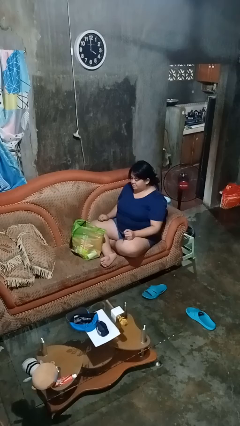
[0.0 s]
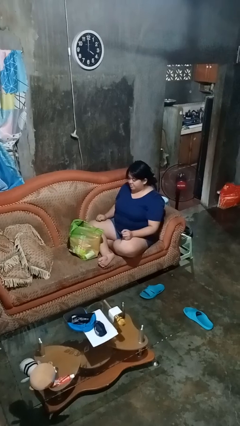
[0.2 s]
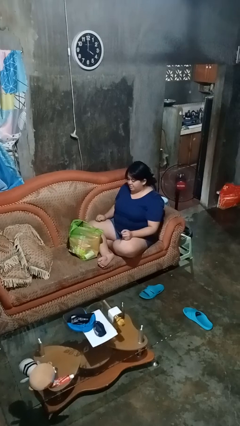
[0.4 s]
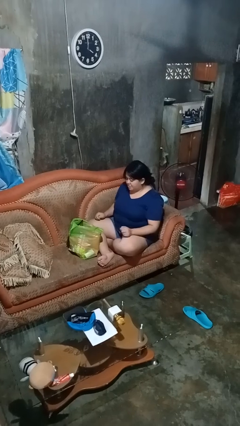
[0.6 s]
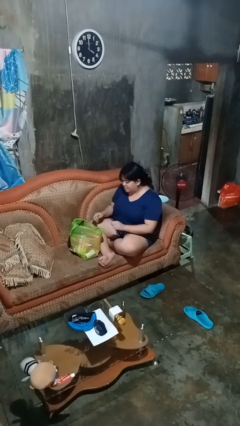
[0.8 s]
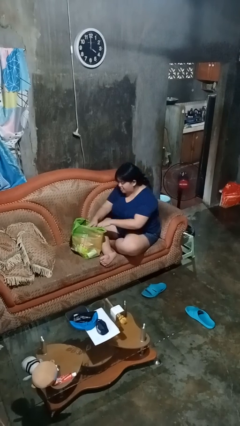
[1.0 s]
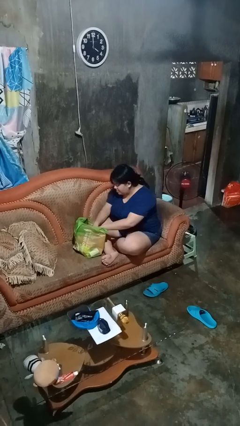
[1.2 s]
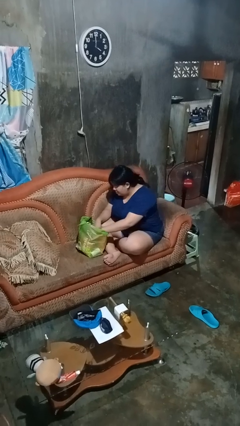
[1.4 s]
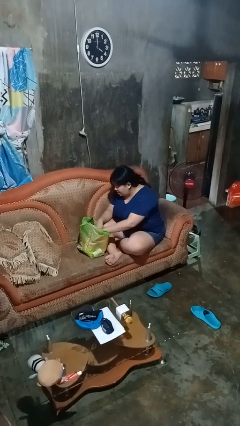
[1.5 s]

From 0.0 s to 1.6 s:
person searches in bag

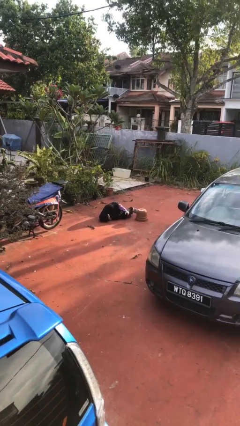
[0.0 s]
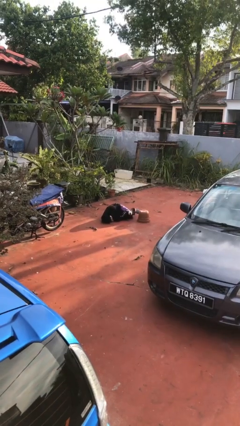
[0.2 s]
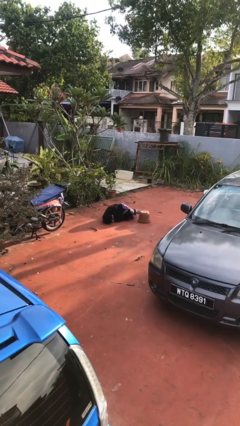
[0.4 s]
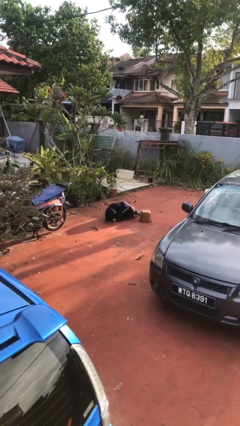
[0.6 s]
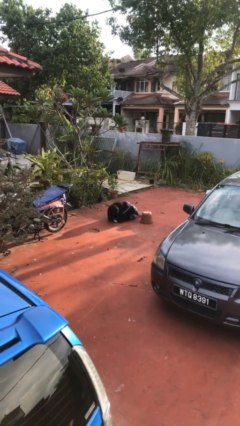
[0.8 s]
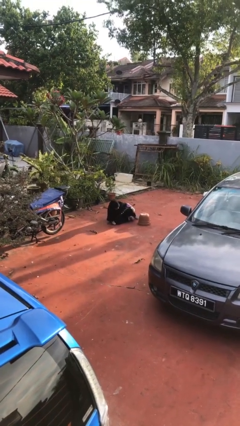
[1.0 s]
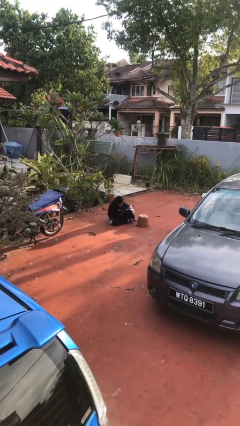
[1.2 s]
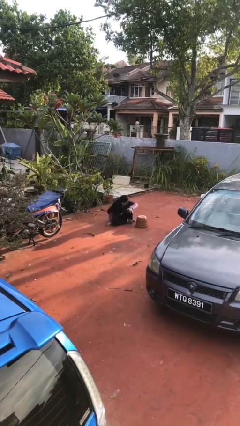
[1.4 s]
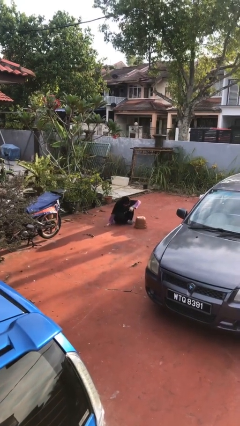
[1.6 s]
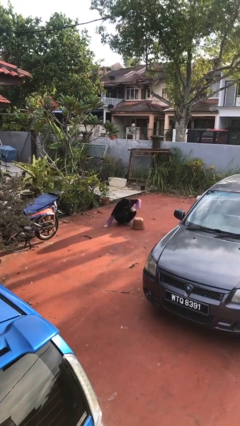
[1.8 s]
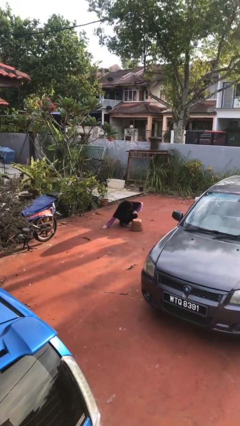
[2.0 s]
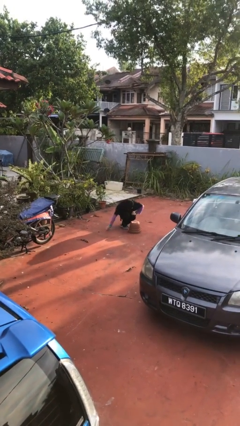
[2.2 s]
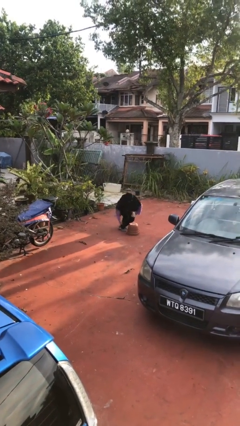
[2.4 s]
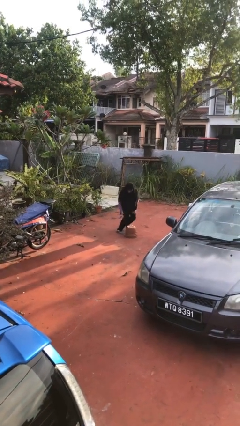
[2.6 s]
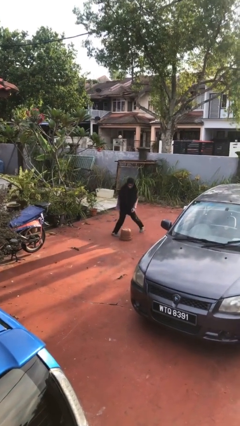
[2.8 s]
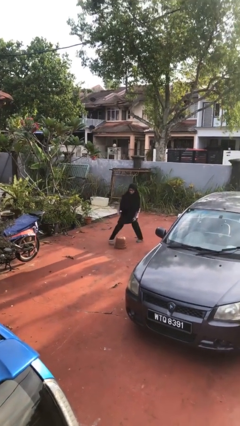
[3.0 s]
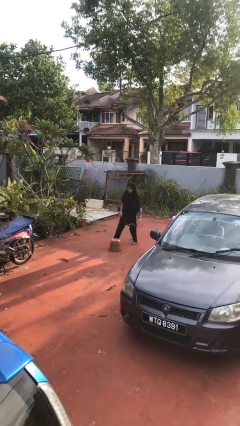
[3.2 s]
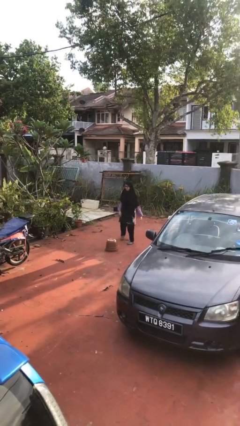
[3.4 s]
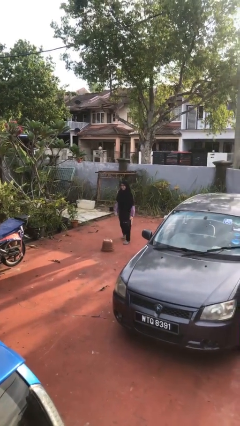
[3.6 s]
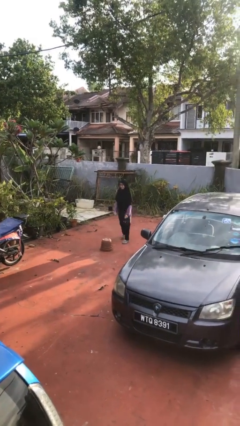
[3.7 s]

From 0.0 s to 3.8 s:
person stands up from floor

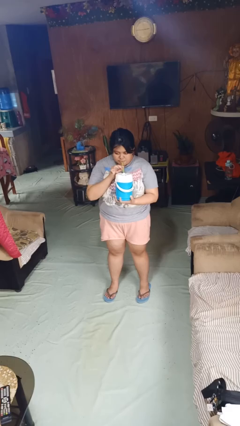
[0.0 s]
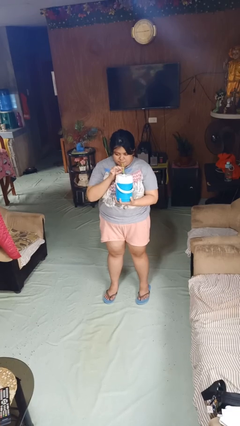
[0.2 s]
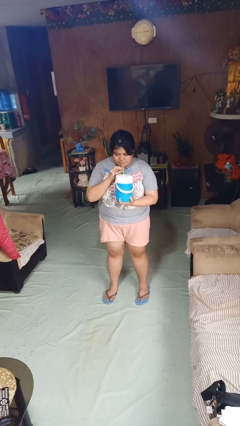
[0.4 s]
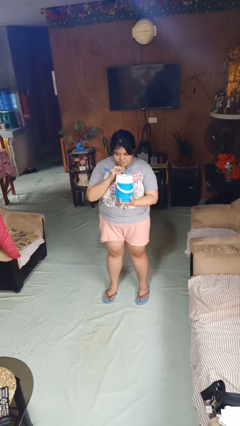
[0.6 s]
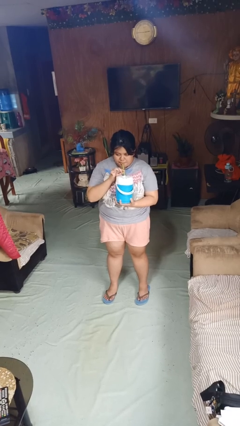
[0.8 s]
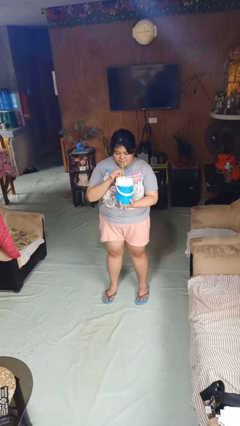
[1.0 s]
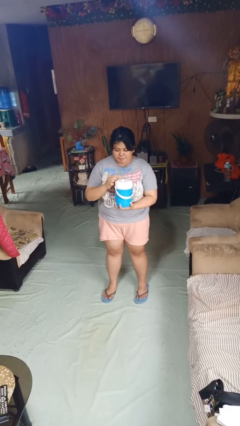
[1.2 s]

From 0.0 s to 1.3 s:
person drinks from straw

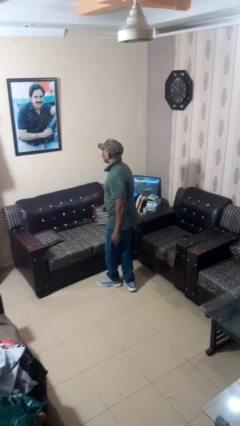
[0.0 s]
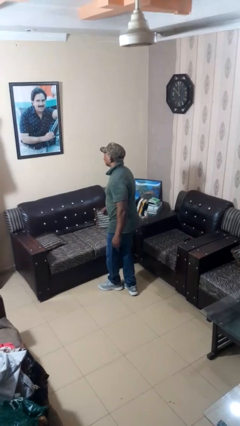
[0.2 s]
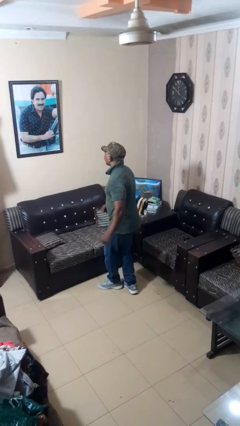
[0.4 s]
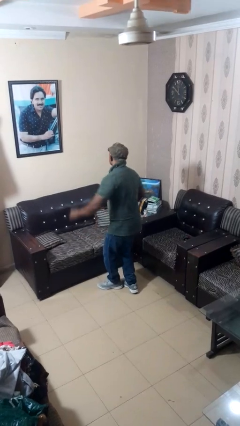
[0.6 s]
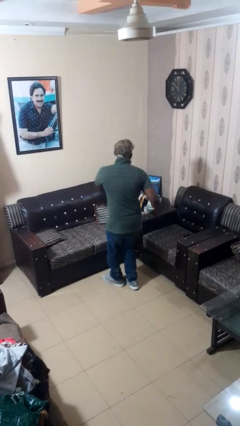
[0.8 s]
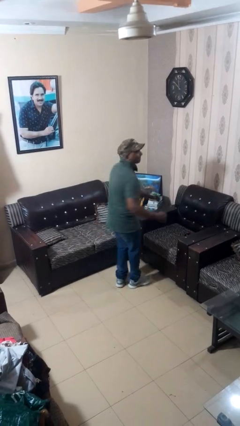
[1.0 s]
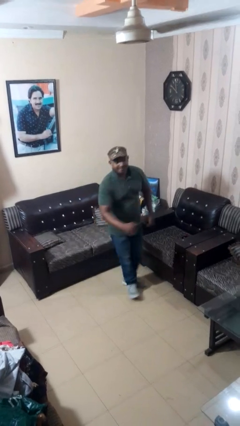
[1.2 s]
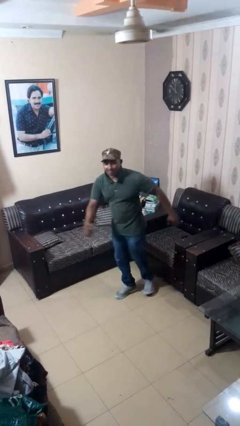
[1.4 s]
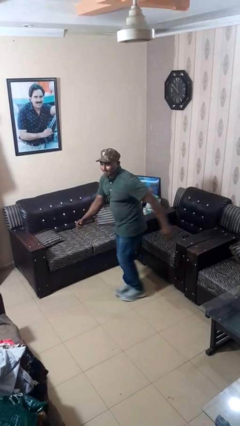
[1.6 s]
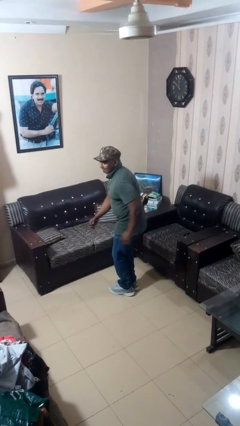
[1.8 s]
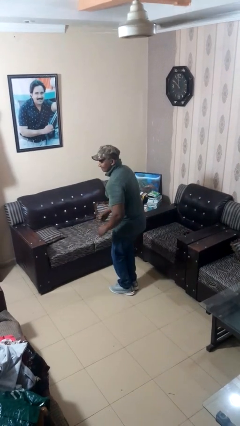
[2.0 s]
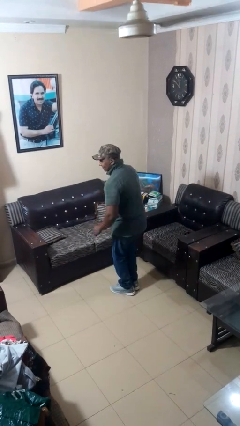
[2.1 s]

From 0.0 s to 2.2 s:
person twirls

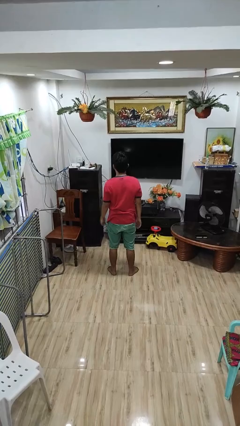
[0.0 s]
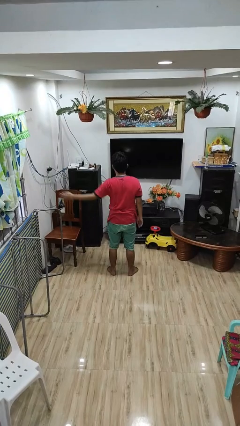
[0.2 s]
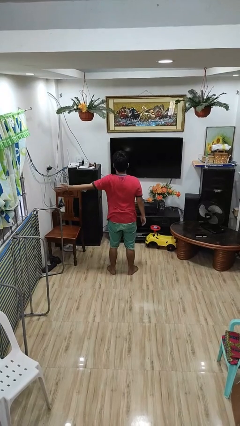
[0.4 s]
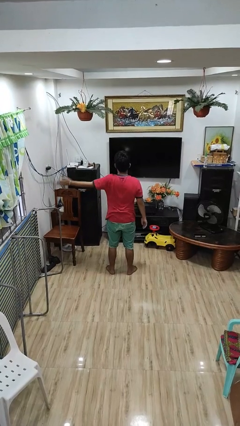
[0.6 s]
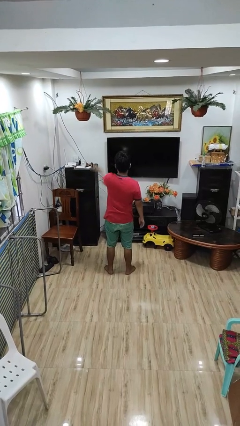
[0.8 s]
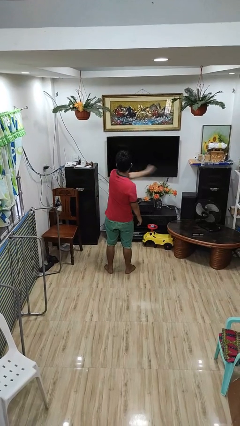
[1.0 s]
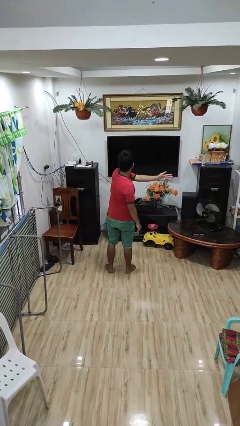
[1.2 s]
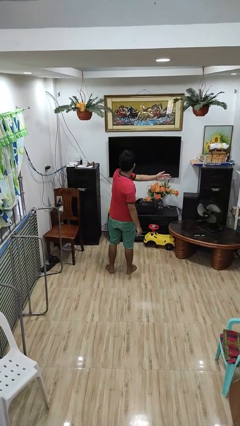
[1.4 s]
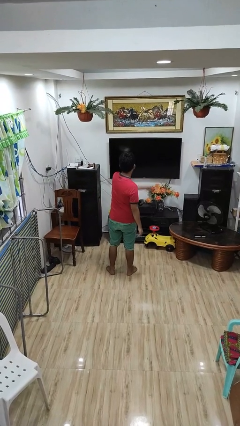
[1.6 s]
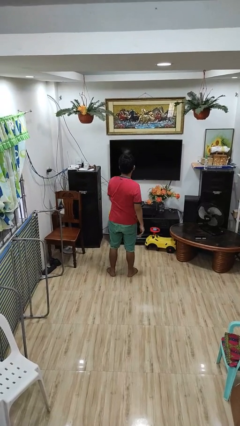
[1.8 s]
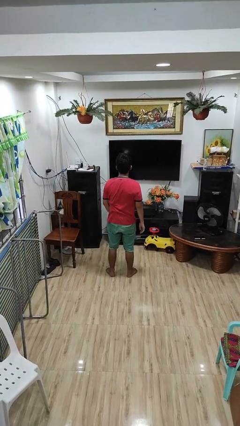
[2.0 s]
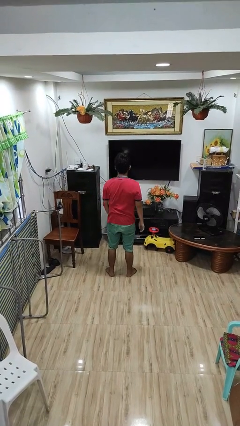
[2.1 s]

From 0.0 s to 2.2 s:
person gestures swipe right

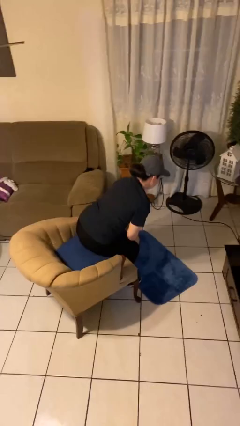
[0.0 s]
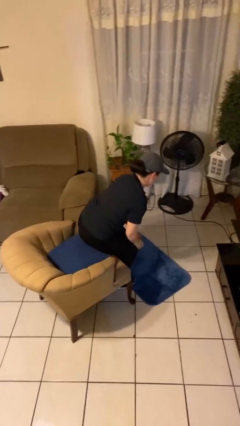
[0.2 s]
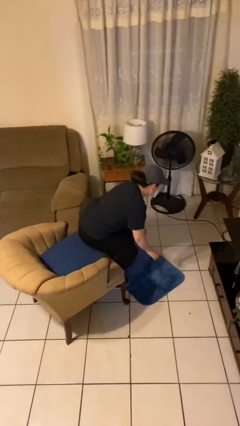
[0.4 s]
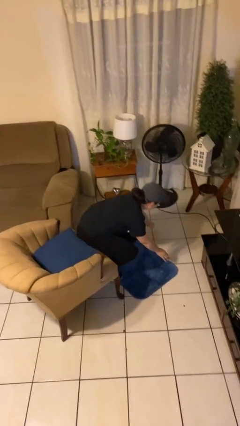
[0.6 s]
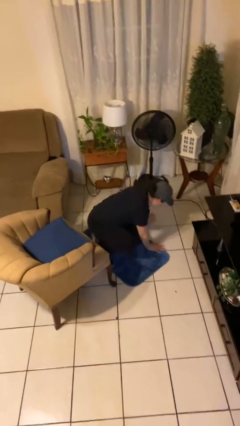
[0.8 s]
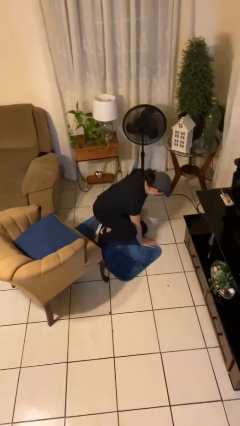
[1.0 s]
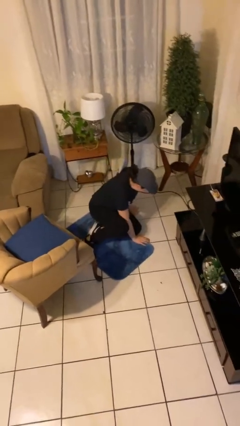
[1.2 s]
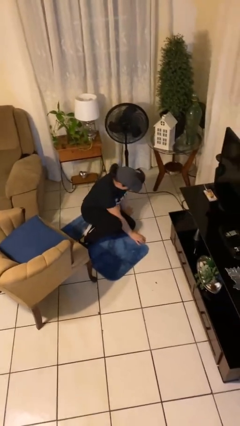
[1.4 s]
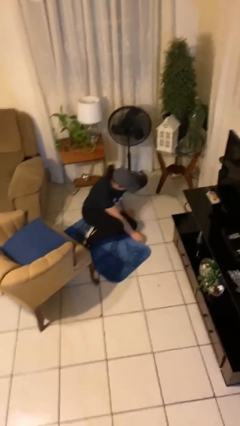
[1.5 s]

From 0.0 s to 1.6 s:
person falls from chair

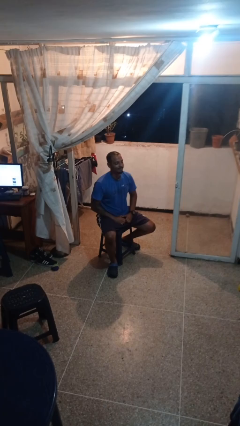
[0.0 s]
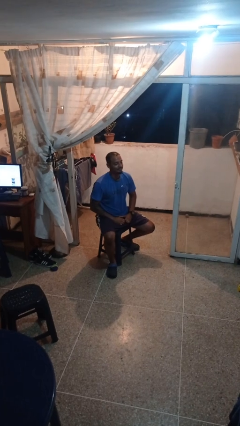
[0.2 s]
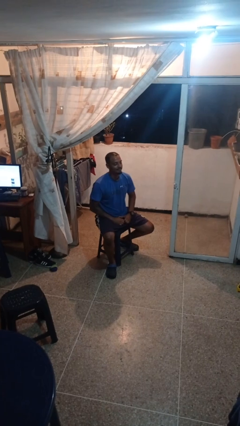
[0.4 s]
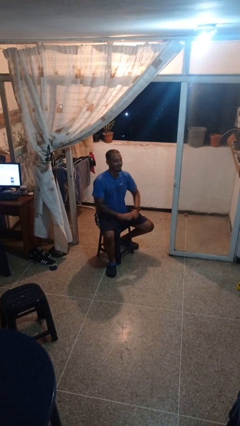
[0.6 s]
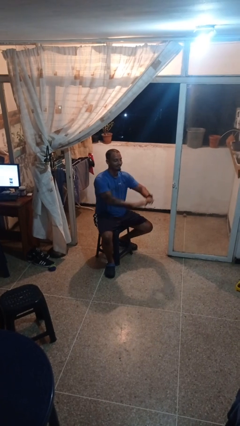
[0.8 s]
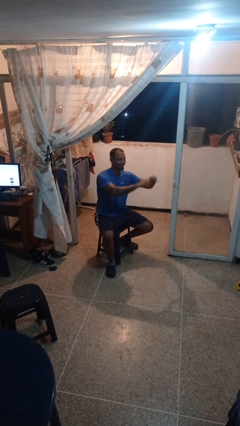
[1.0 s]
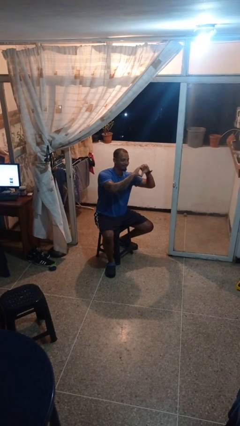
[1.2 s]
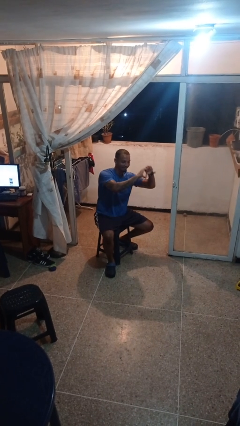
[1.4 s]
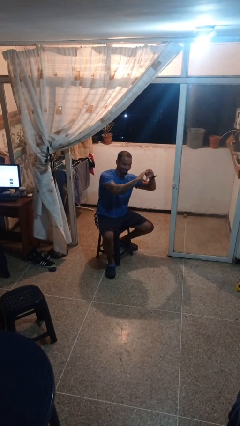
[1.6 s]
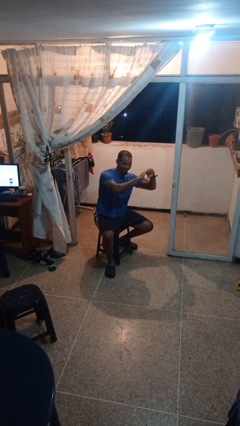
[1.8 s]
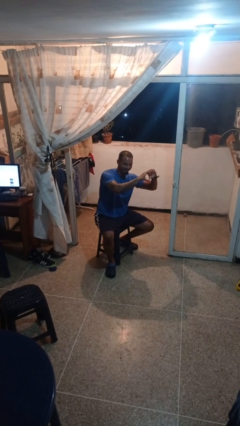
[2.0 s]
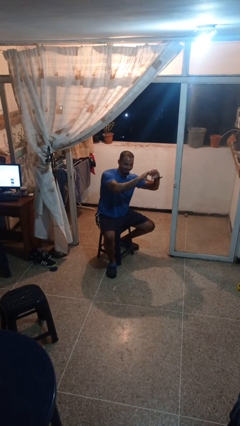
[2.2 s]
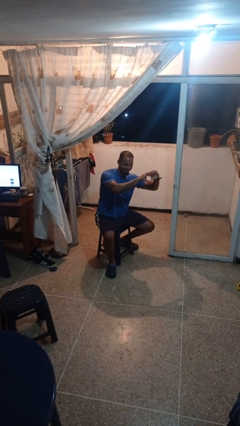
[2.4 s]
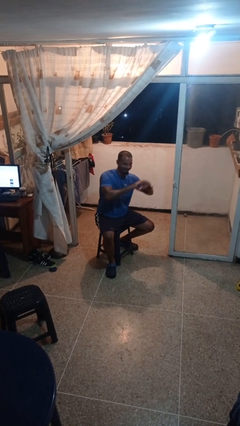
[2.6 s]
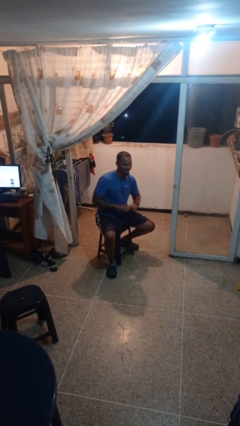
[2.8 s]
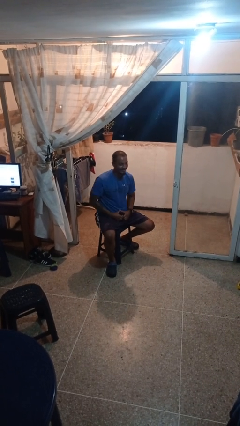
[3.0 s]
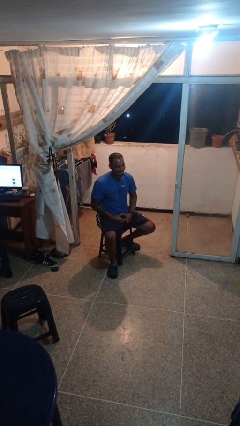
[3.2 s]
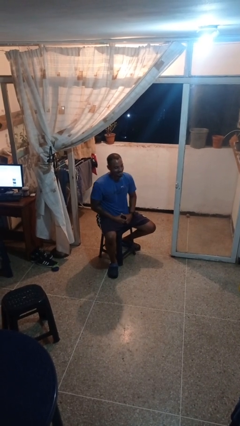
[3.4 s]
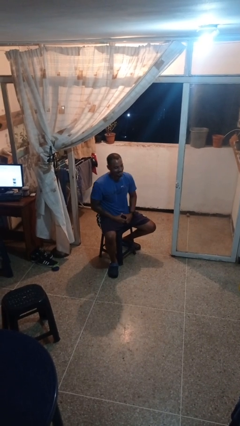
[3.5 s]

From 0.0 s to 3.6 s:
person gestures heart

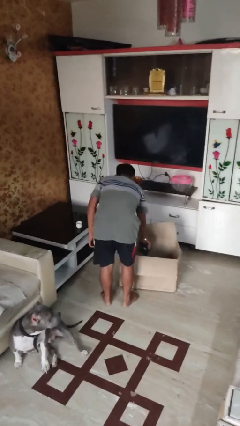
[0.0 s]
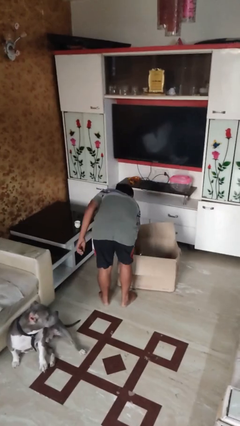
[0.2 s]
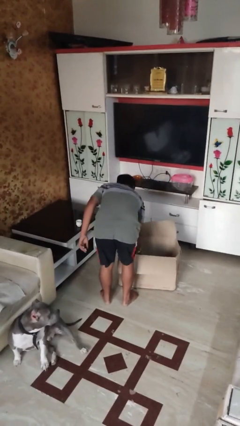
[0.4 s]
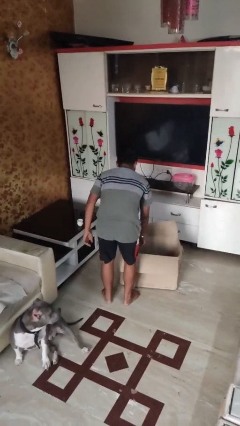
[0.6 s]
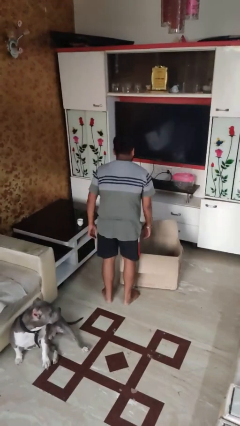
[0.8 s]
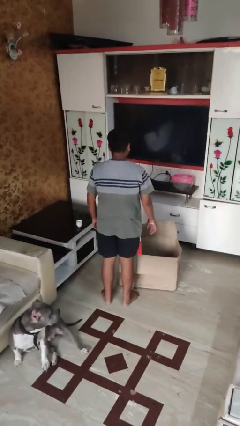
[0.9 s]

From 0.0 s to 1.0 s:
person puts object into box
